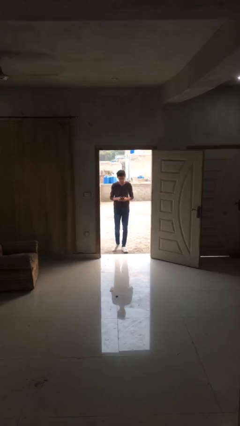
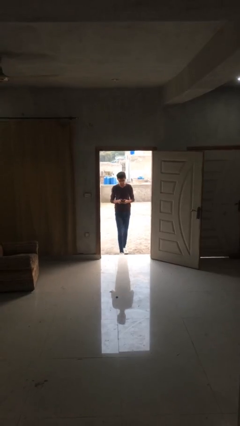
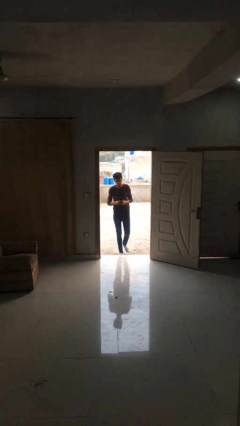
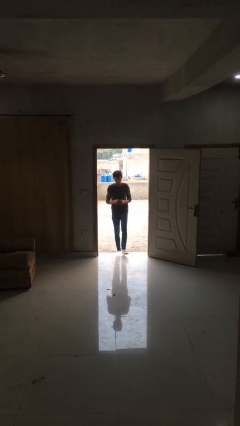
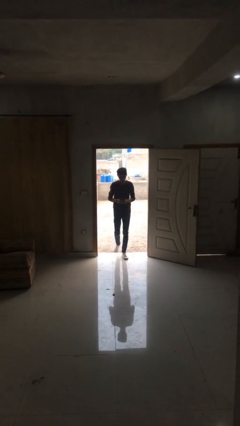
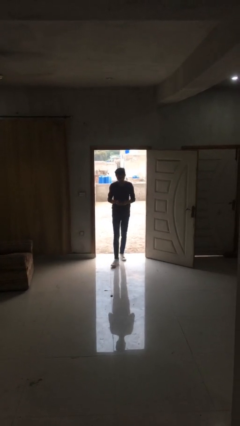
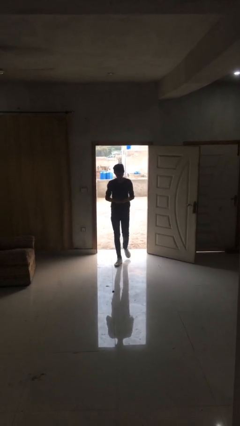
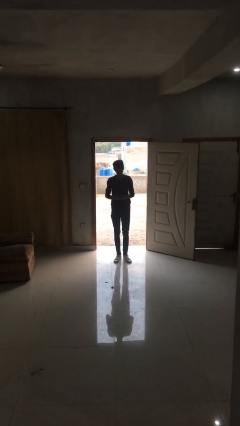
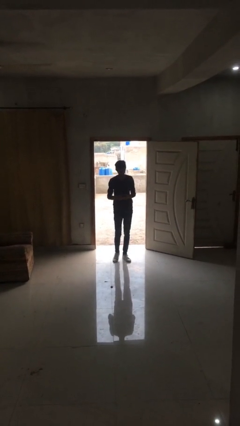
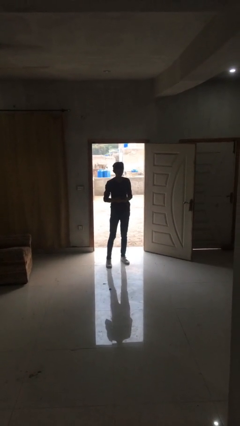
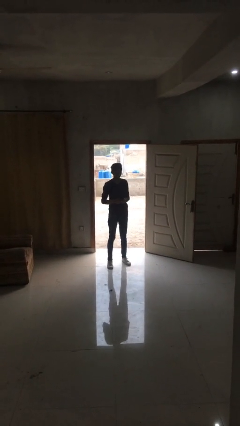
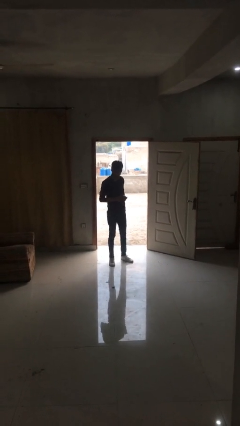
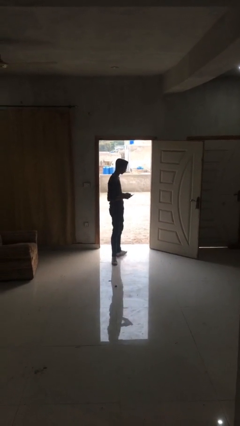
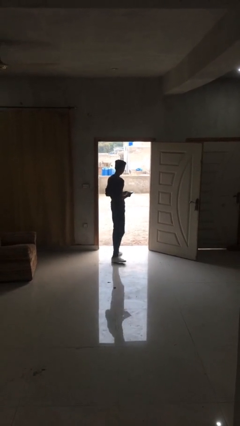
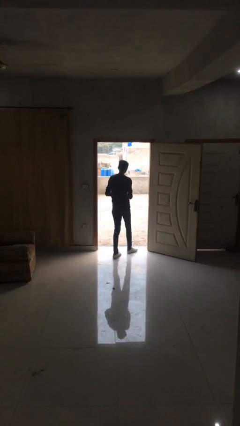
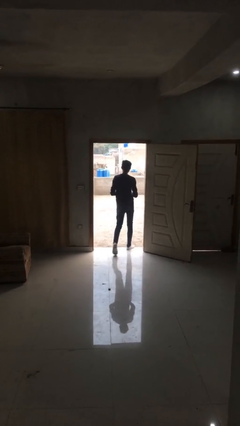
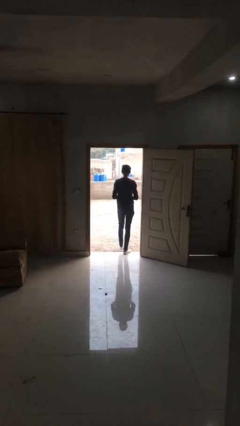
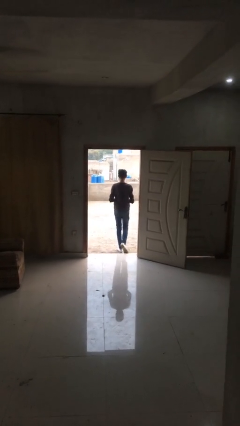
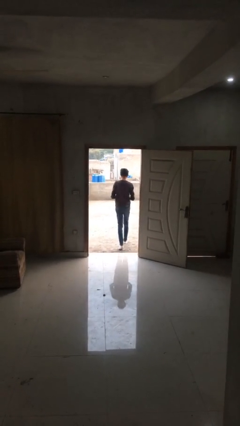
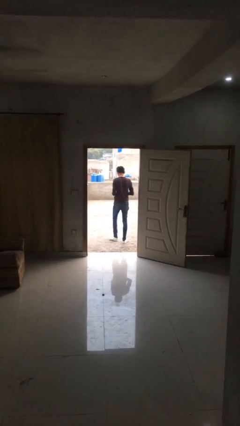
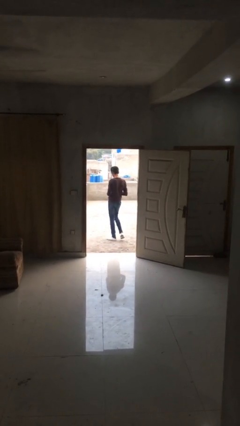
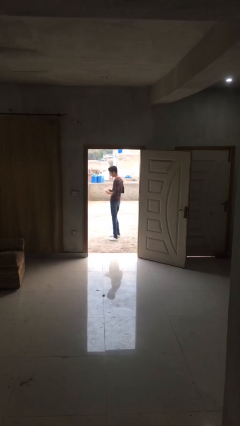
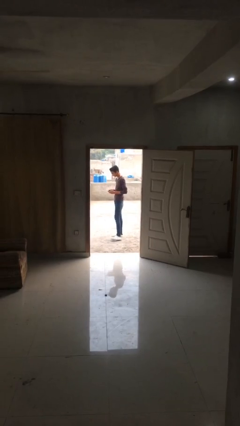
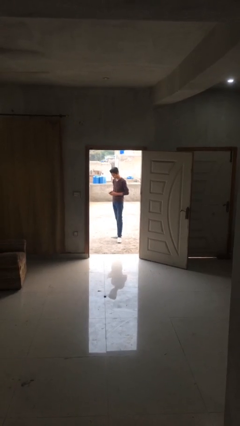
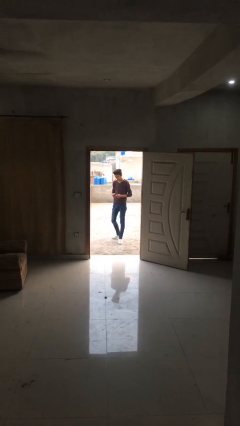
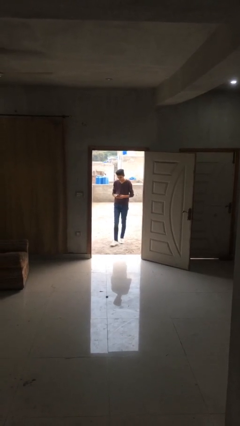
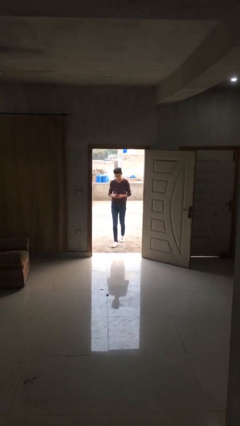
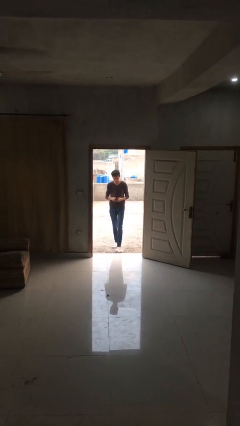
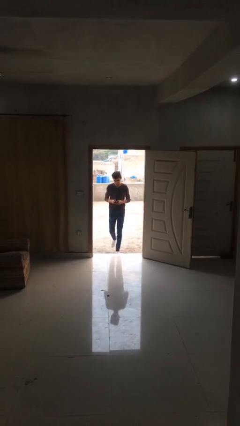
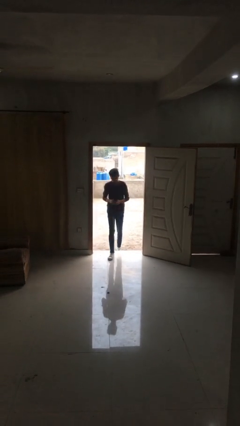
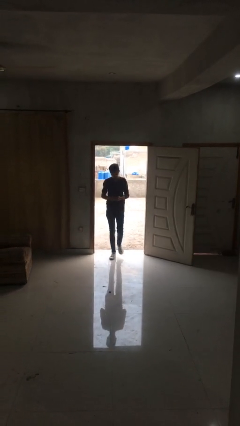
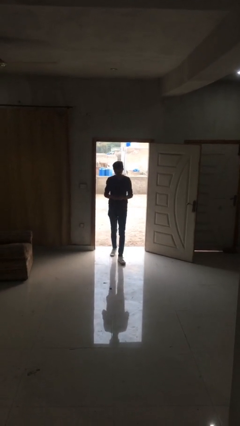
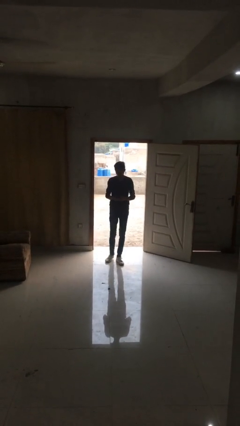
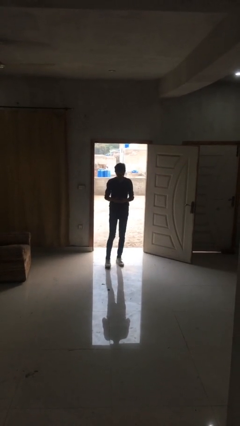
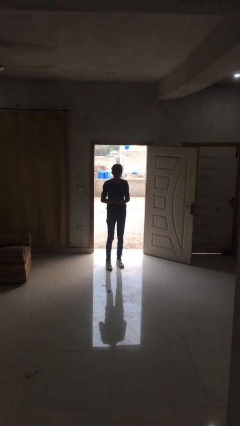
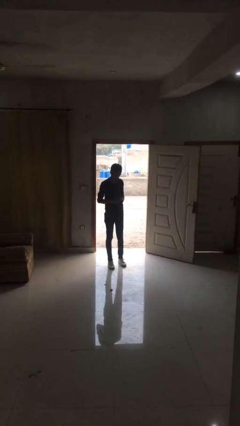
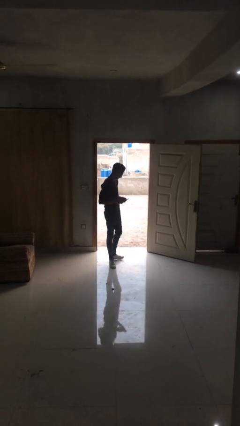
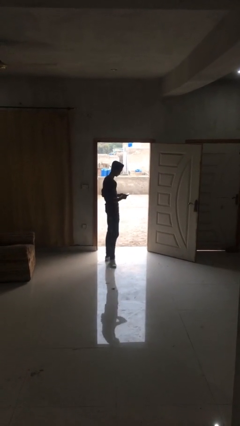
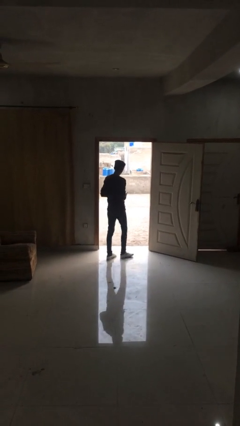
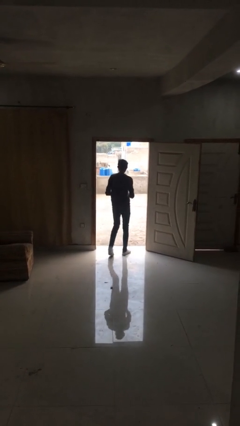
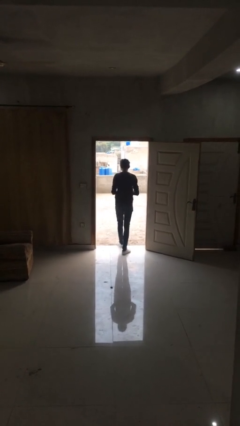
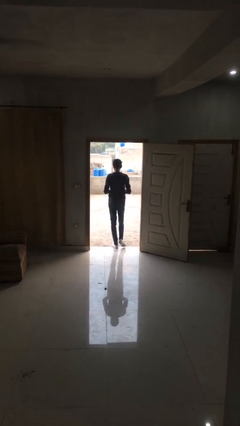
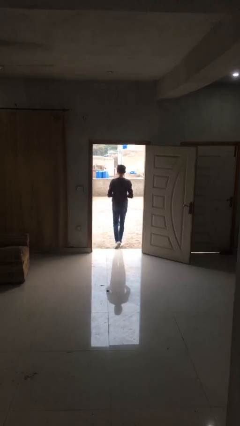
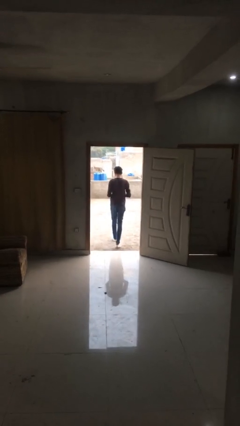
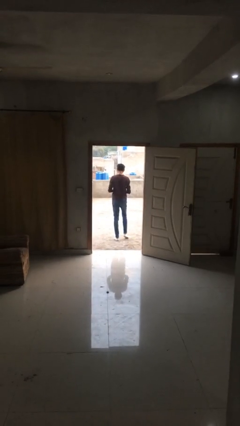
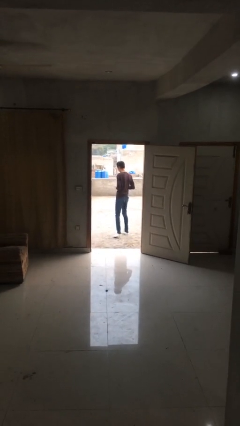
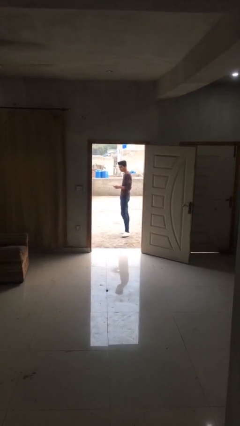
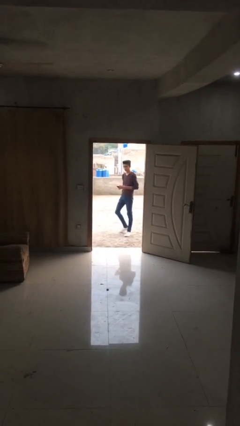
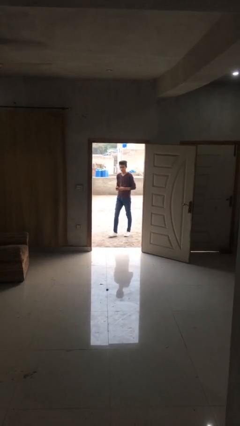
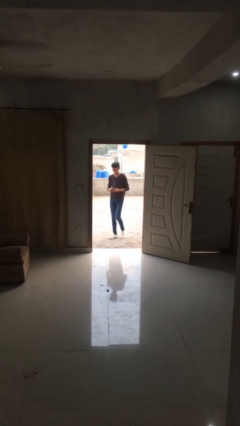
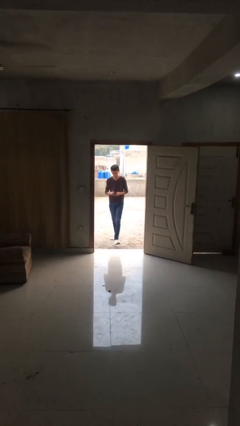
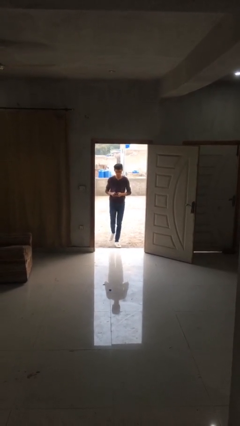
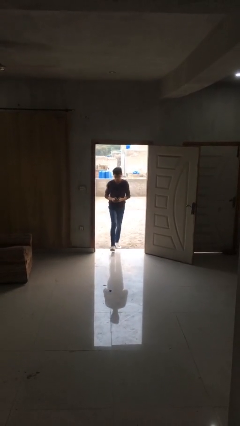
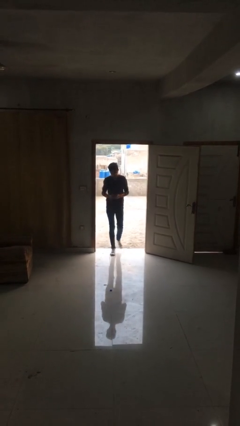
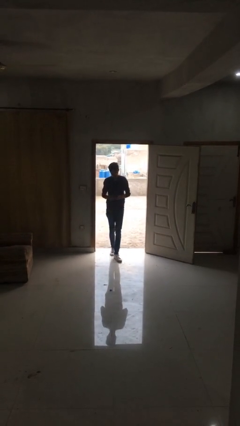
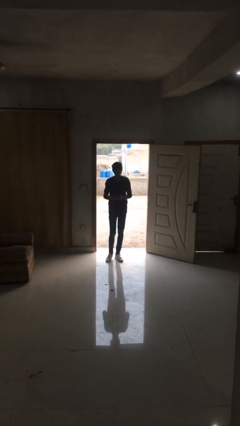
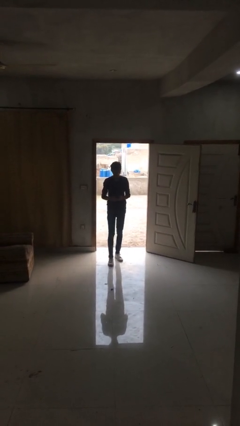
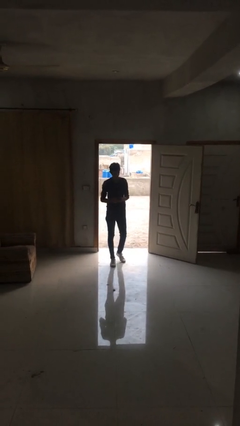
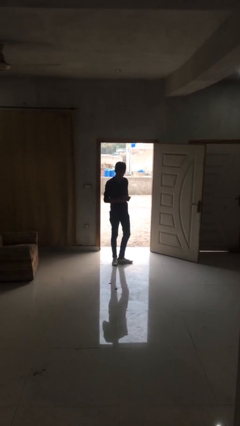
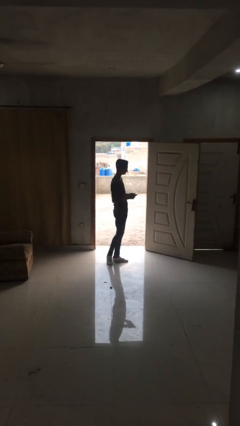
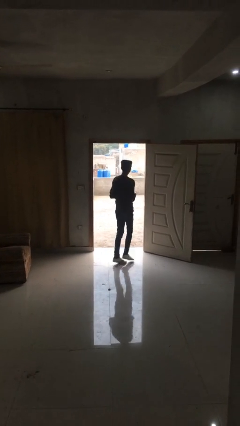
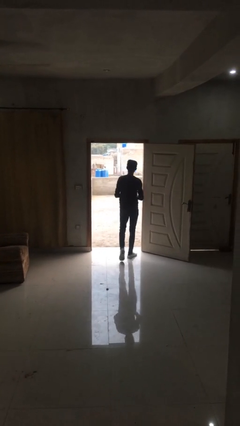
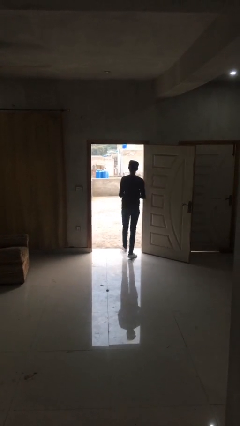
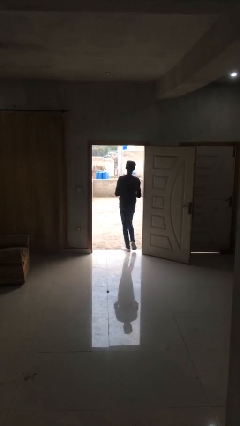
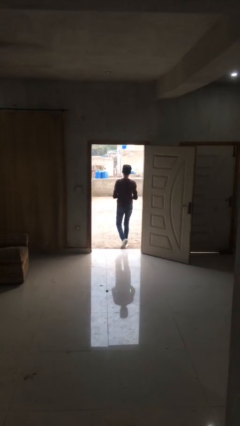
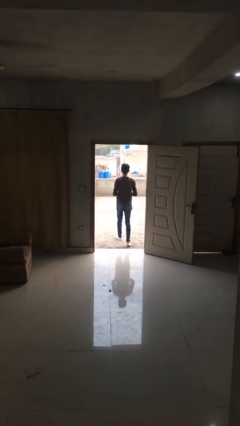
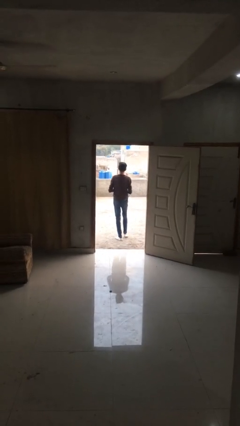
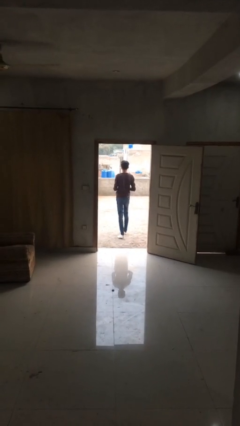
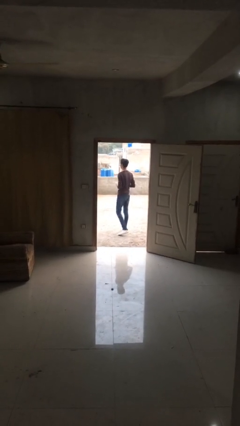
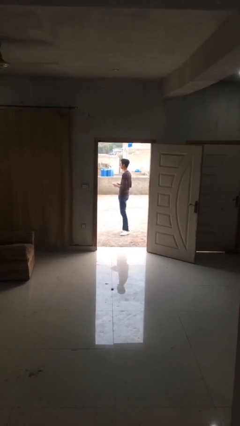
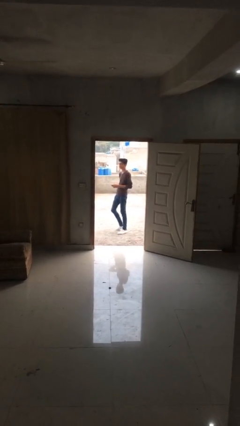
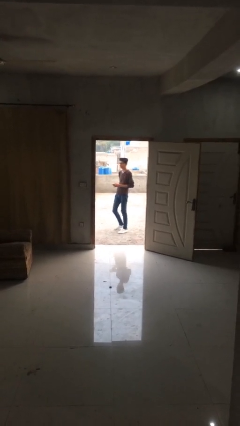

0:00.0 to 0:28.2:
person texts on phone

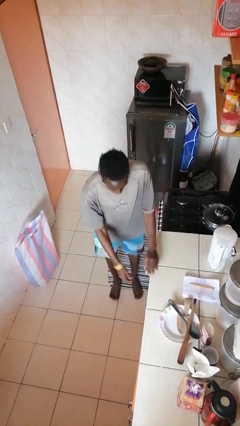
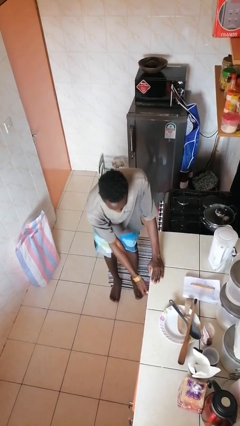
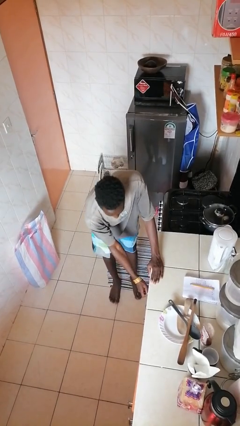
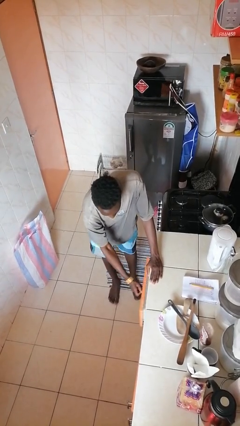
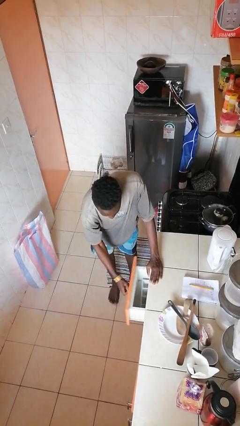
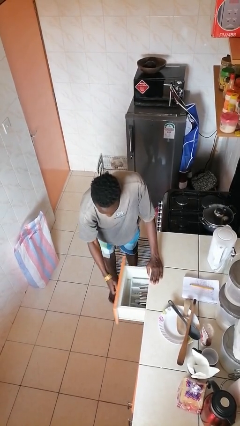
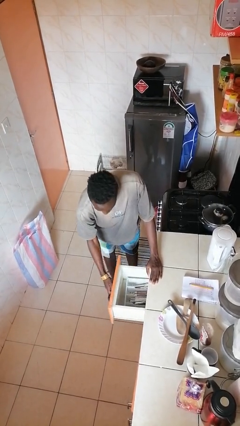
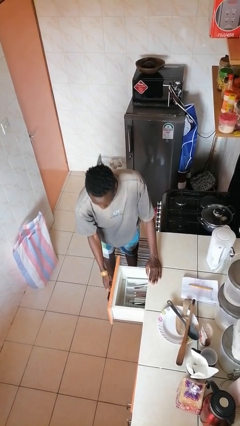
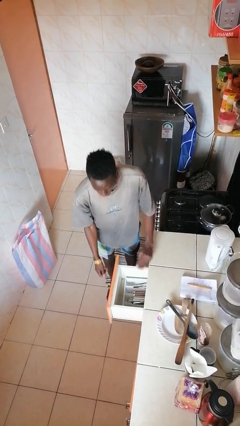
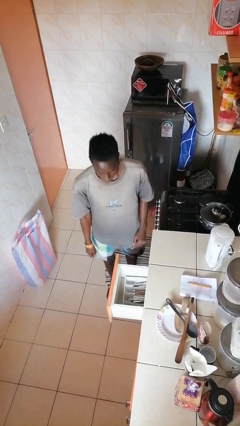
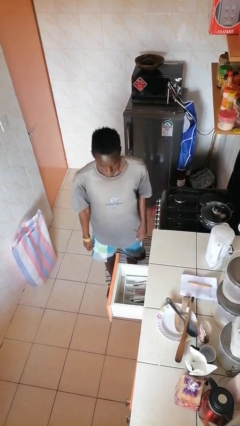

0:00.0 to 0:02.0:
person opens kitchen drawer

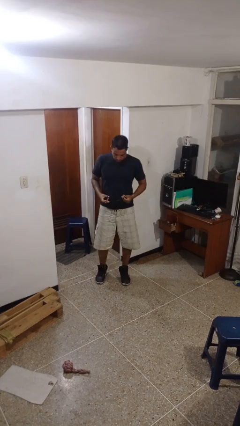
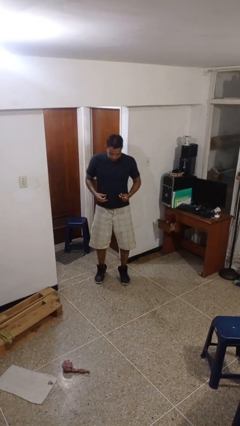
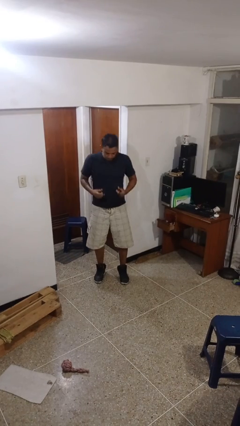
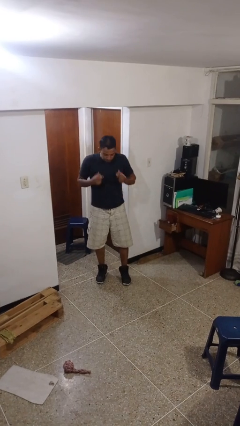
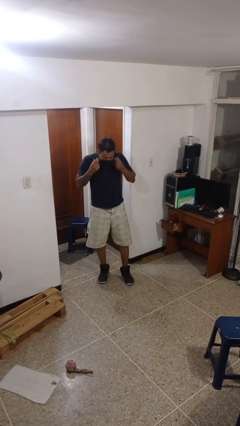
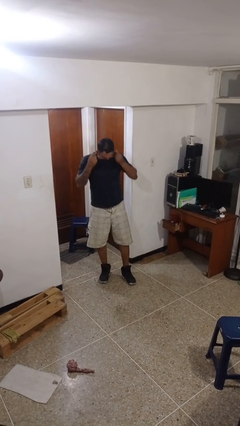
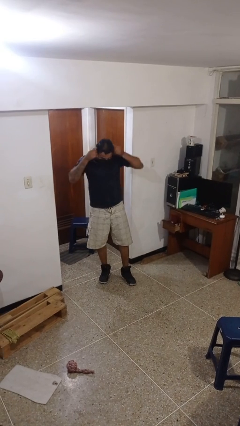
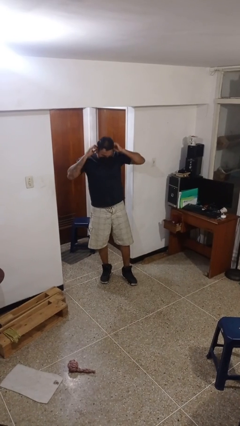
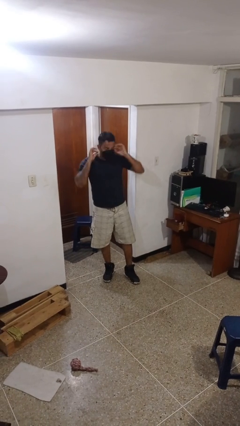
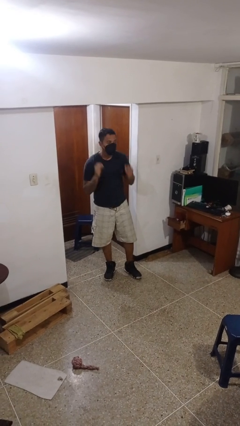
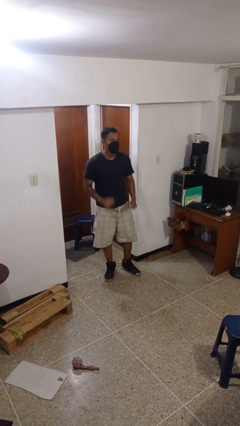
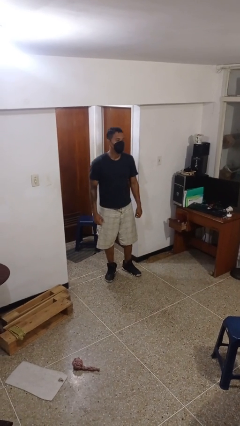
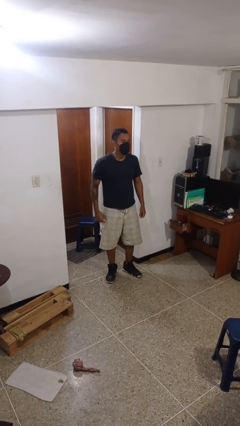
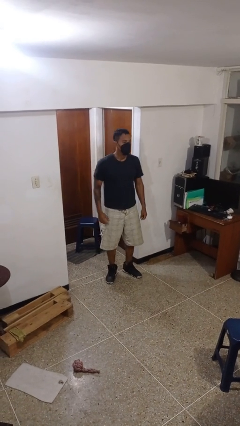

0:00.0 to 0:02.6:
person puts on facemask
